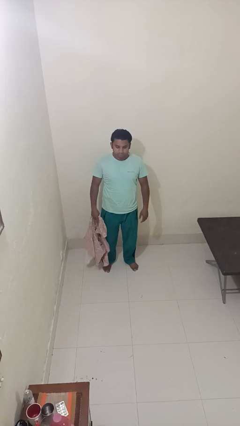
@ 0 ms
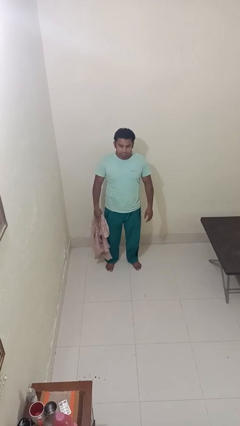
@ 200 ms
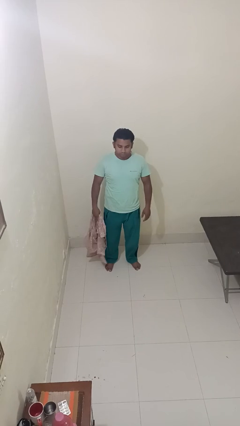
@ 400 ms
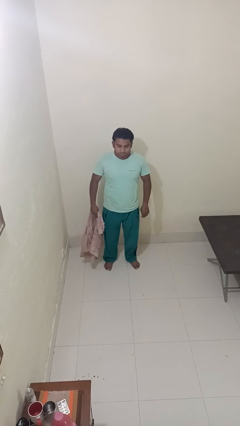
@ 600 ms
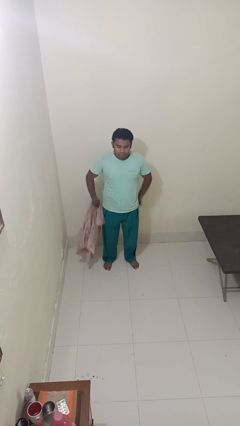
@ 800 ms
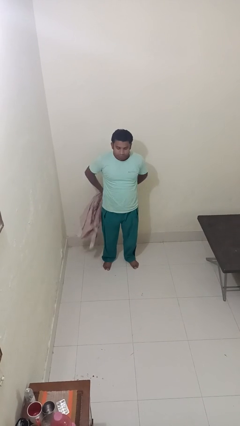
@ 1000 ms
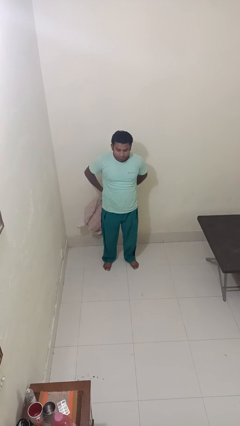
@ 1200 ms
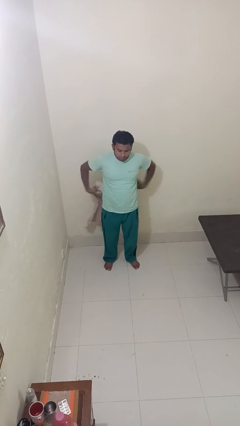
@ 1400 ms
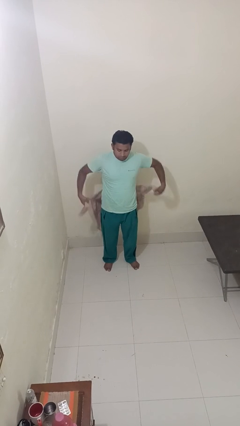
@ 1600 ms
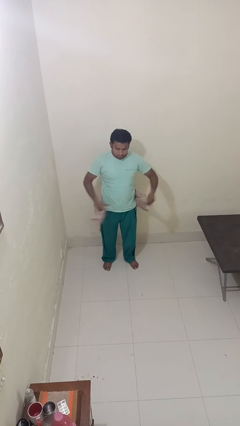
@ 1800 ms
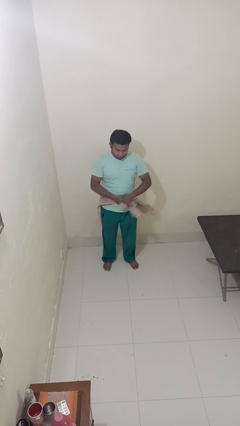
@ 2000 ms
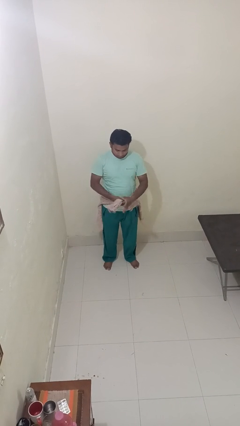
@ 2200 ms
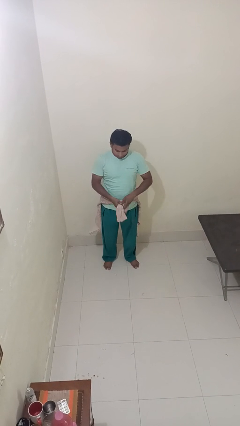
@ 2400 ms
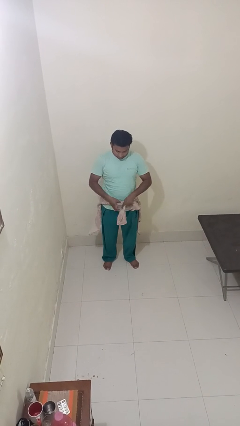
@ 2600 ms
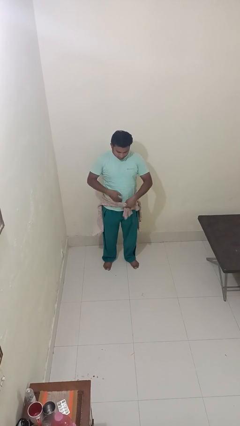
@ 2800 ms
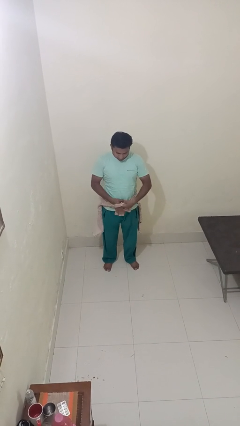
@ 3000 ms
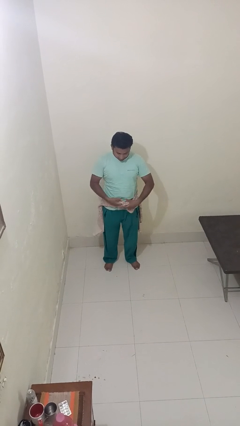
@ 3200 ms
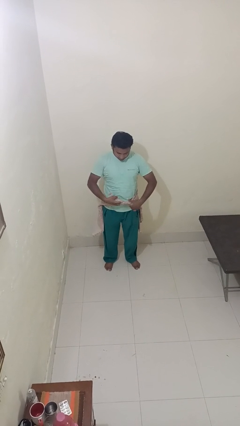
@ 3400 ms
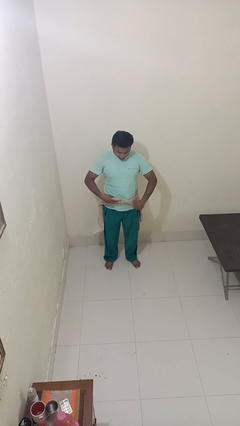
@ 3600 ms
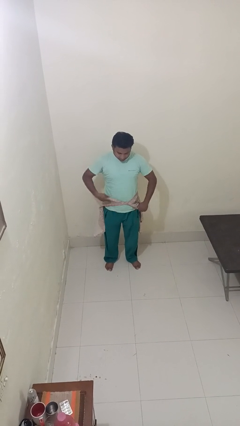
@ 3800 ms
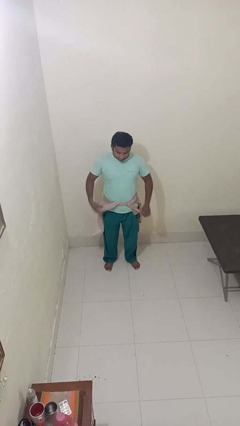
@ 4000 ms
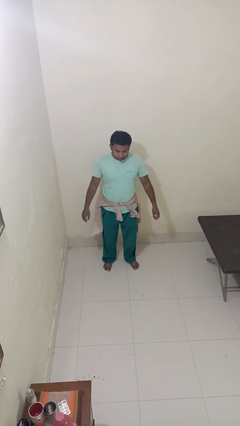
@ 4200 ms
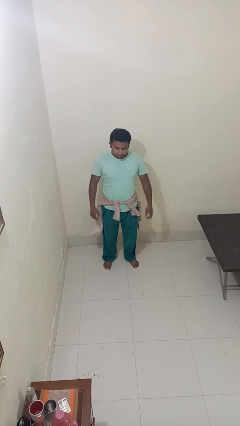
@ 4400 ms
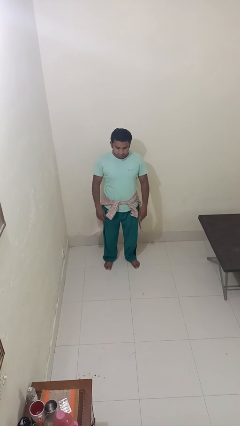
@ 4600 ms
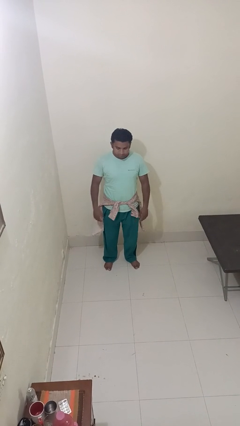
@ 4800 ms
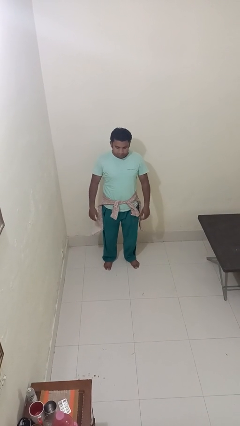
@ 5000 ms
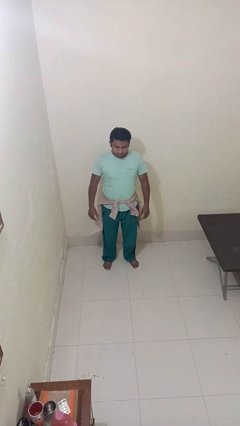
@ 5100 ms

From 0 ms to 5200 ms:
person ties jacket around waist

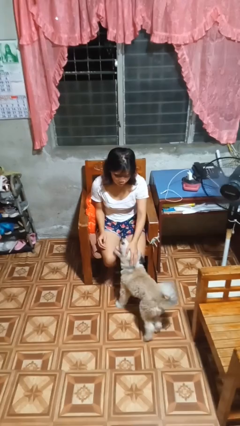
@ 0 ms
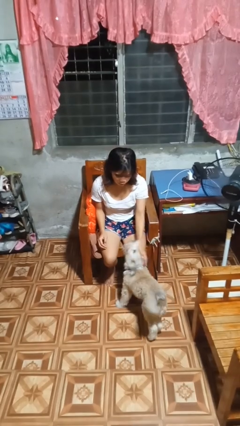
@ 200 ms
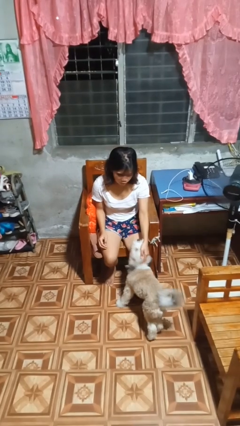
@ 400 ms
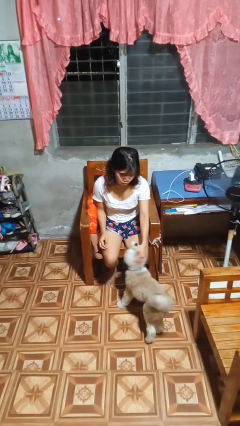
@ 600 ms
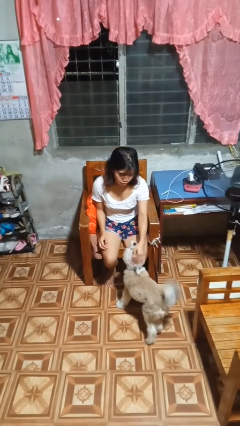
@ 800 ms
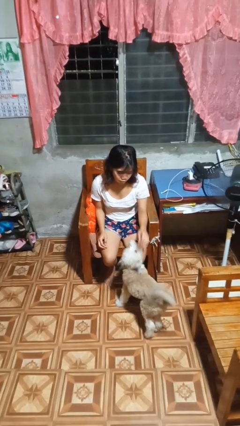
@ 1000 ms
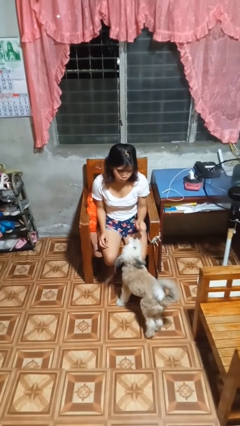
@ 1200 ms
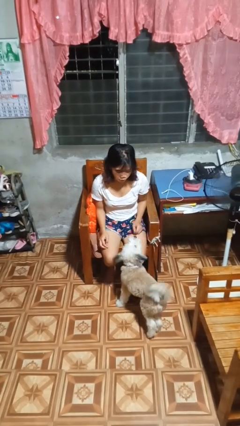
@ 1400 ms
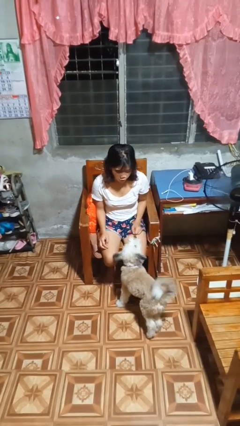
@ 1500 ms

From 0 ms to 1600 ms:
person pets dog

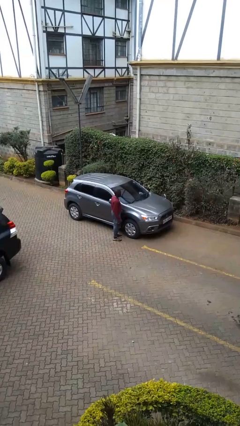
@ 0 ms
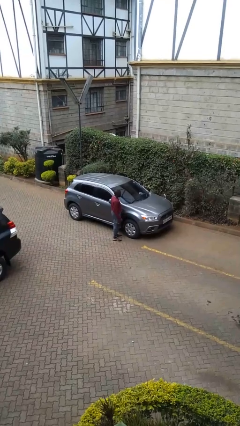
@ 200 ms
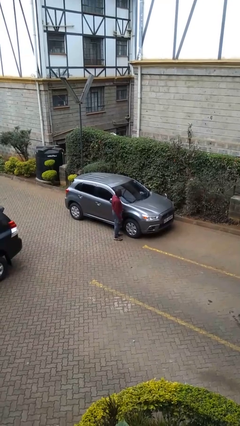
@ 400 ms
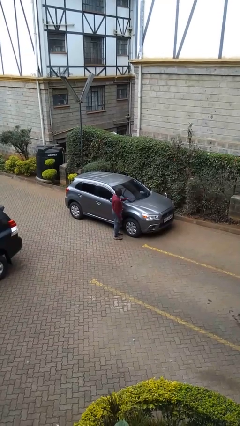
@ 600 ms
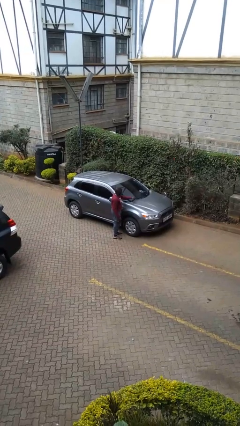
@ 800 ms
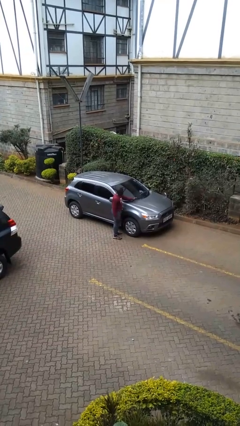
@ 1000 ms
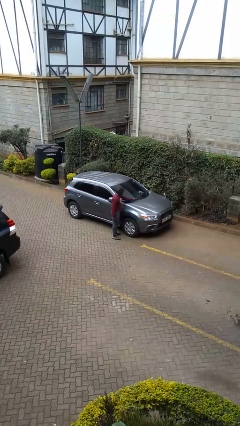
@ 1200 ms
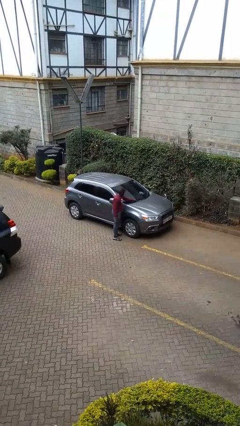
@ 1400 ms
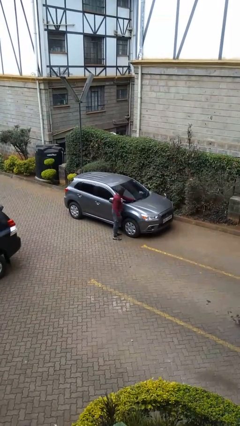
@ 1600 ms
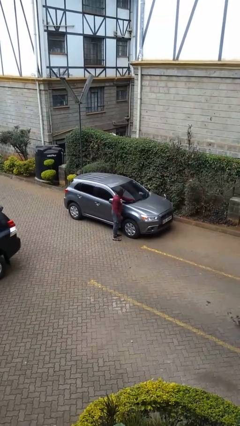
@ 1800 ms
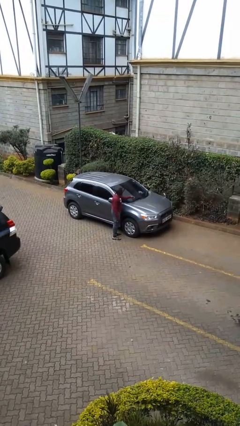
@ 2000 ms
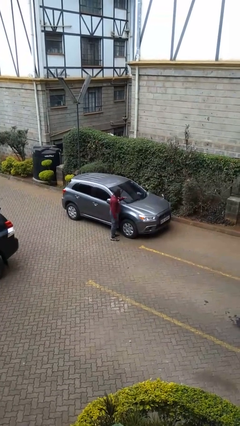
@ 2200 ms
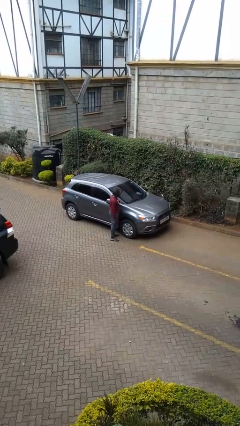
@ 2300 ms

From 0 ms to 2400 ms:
person flips down car wipers

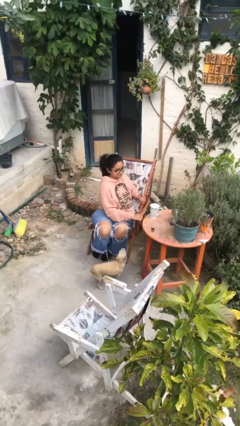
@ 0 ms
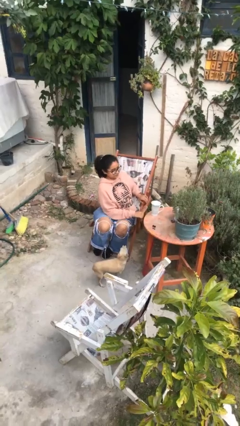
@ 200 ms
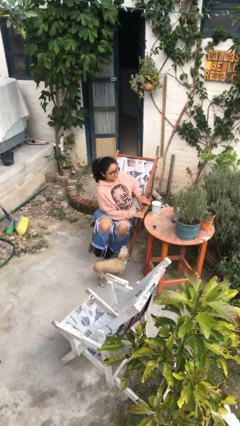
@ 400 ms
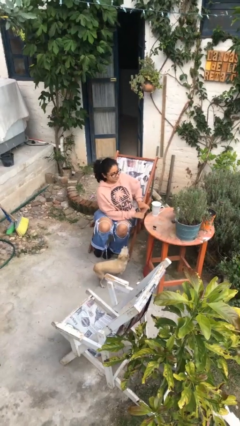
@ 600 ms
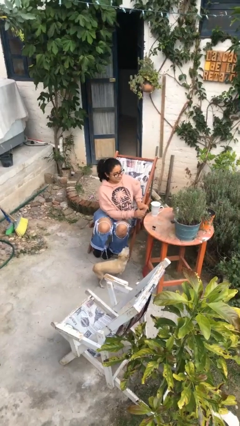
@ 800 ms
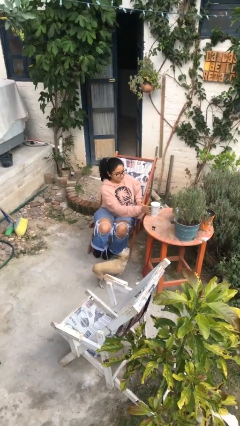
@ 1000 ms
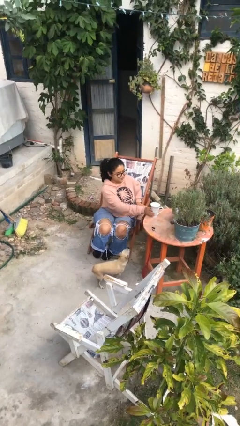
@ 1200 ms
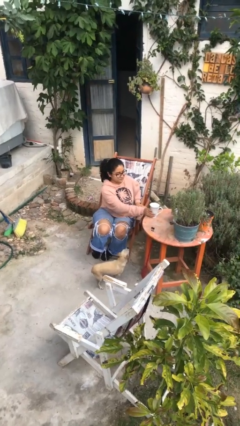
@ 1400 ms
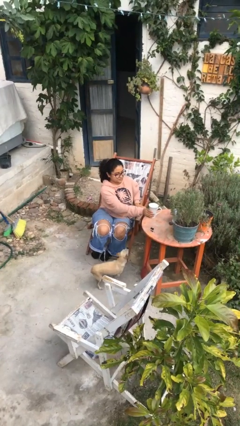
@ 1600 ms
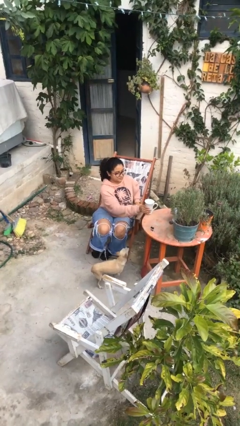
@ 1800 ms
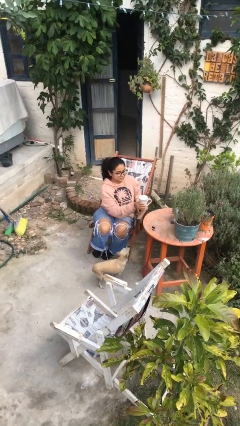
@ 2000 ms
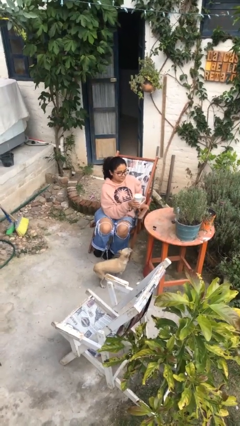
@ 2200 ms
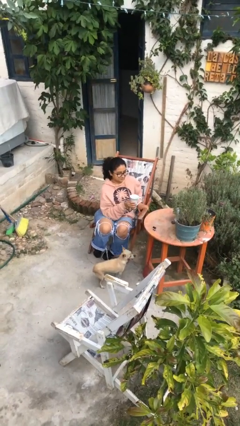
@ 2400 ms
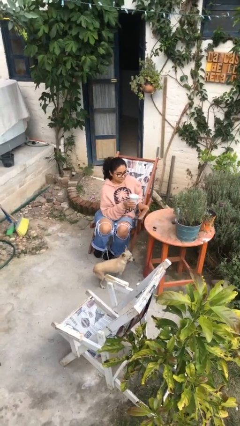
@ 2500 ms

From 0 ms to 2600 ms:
person picks up object from table

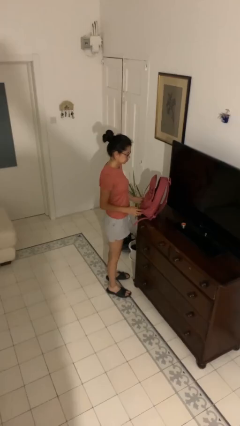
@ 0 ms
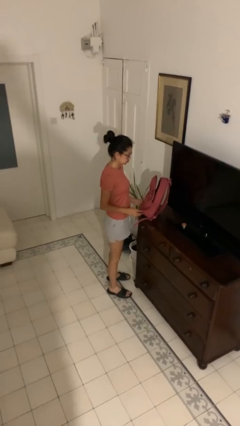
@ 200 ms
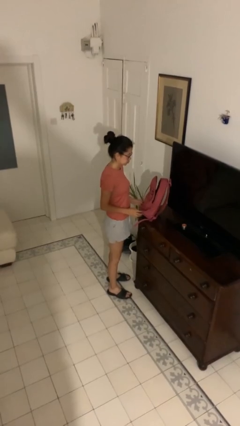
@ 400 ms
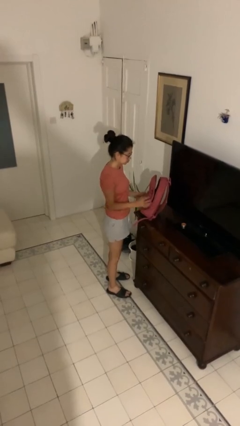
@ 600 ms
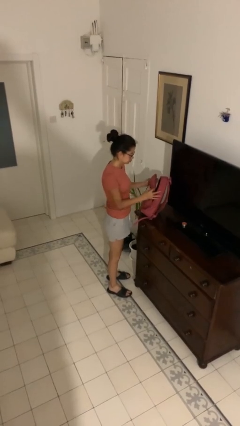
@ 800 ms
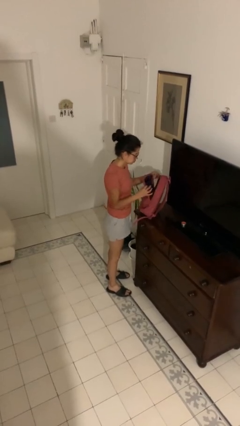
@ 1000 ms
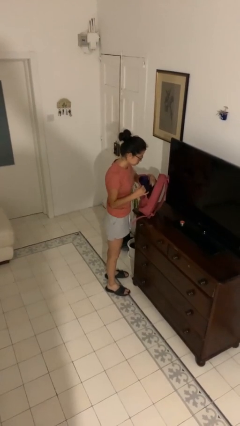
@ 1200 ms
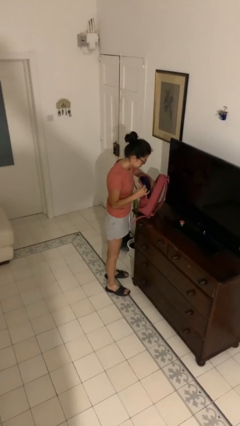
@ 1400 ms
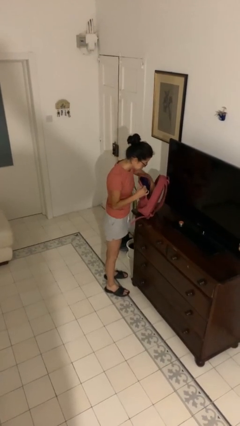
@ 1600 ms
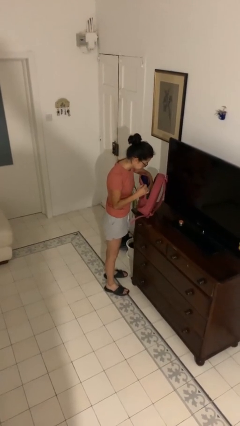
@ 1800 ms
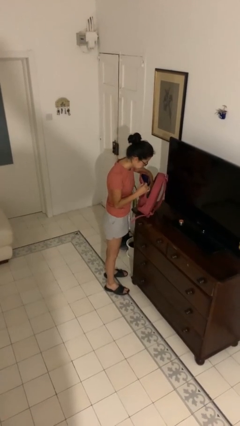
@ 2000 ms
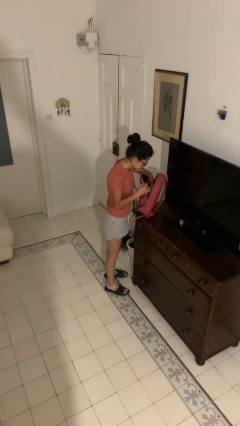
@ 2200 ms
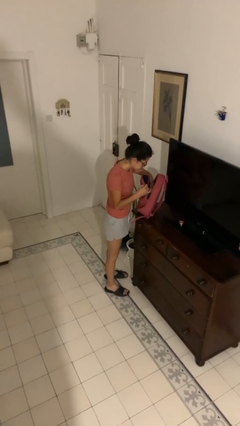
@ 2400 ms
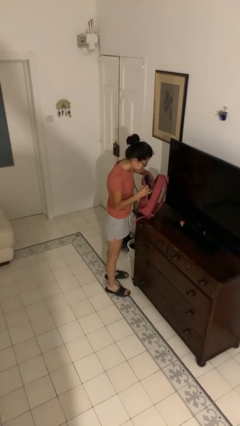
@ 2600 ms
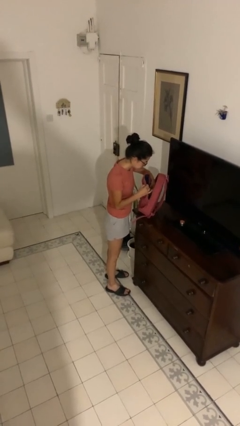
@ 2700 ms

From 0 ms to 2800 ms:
person searches in backpack

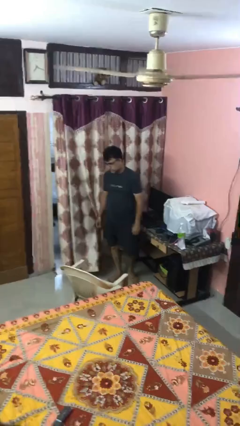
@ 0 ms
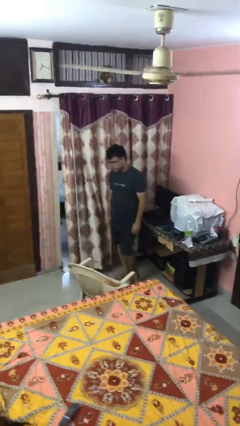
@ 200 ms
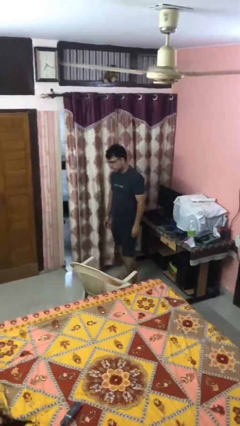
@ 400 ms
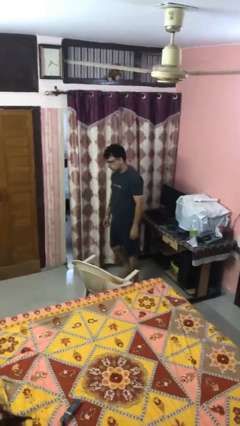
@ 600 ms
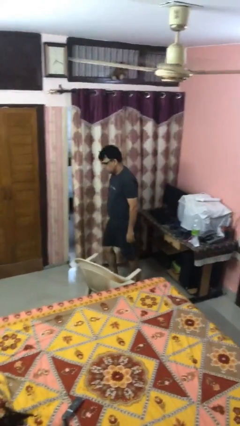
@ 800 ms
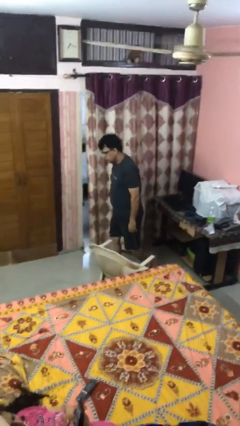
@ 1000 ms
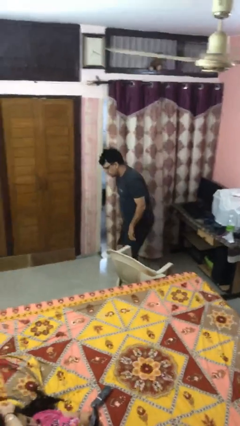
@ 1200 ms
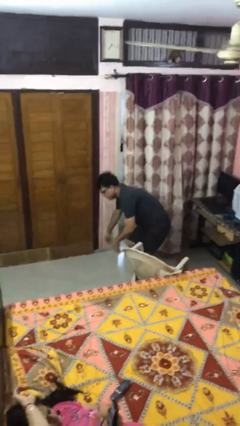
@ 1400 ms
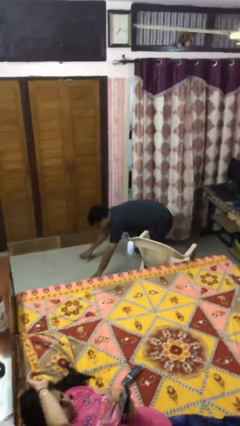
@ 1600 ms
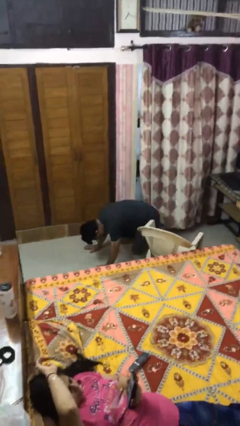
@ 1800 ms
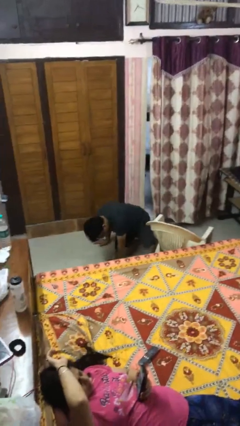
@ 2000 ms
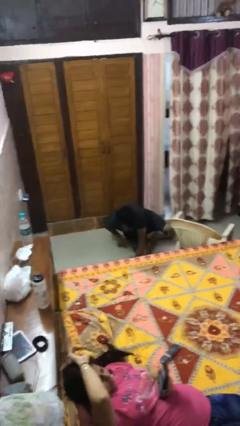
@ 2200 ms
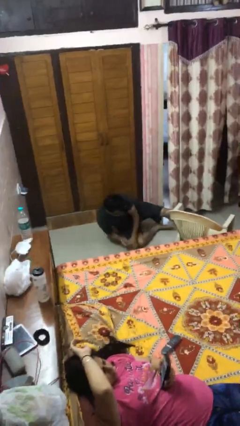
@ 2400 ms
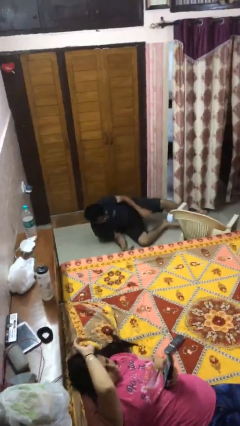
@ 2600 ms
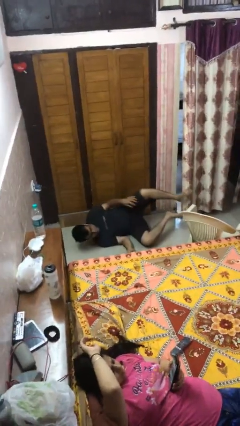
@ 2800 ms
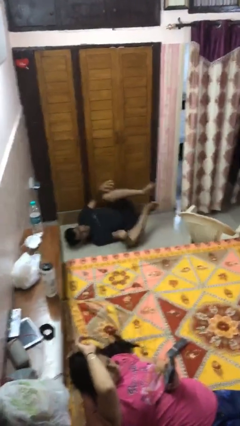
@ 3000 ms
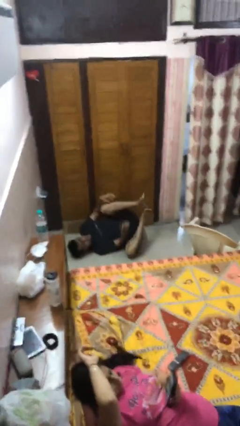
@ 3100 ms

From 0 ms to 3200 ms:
person trips on object on floor
